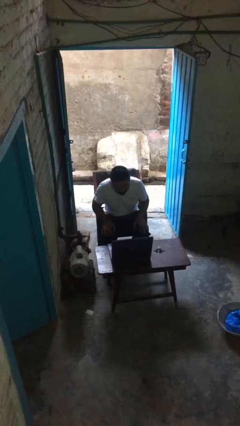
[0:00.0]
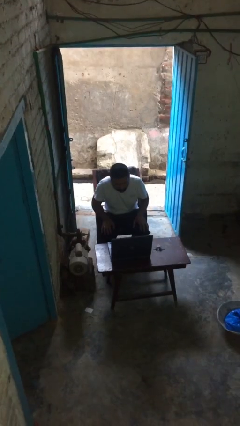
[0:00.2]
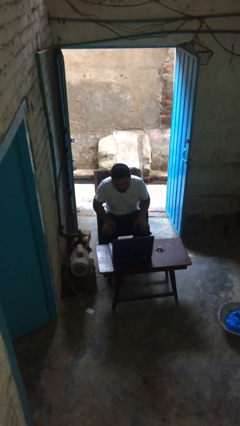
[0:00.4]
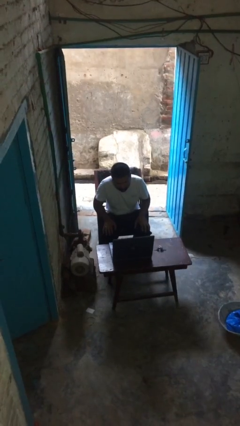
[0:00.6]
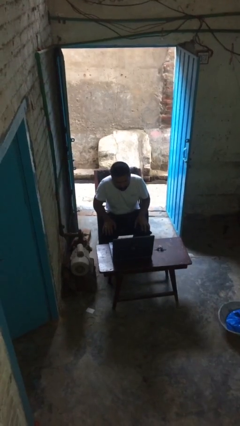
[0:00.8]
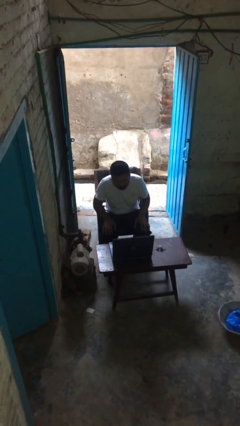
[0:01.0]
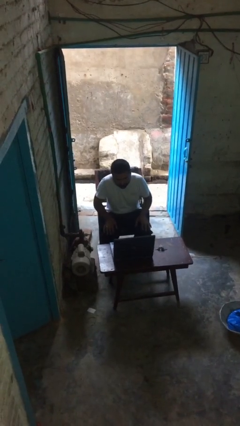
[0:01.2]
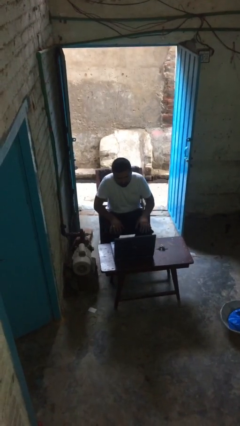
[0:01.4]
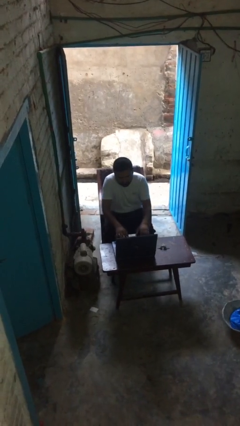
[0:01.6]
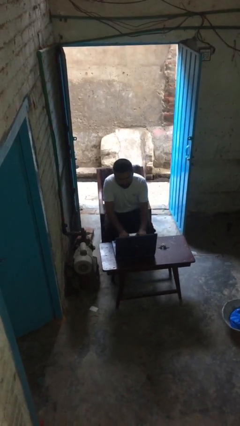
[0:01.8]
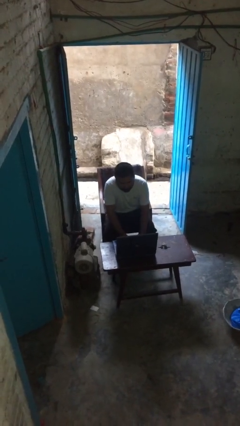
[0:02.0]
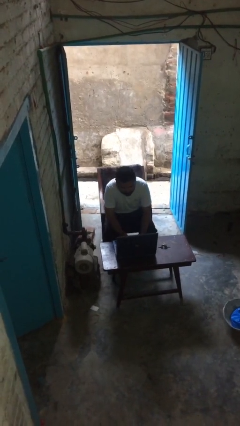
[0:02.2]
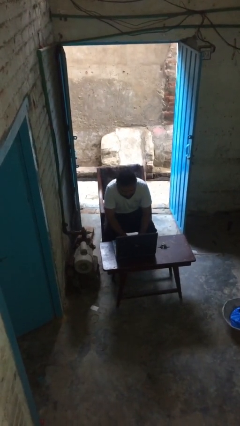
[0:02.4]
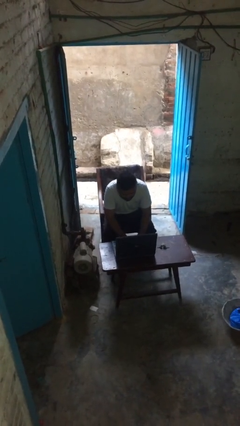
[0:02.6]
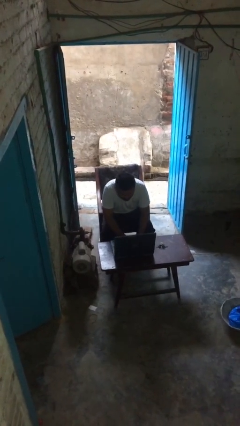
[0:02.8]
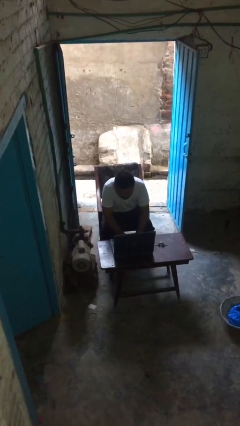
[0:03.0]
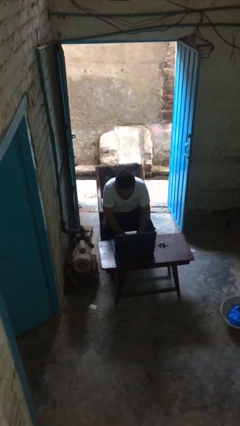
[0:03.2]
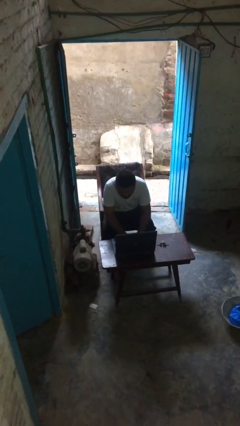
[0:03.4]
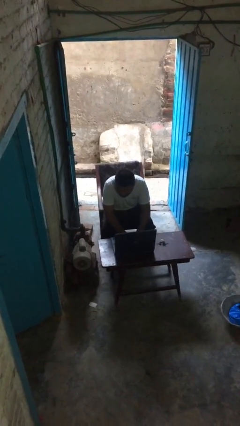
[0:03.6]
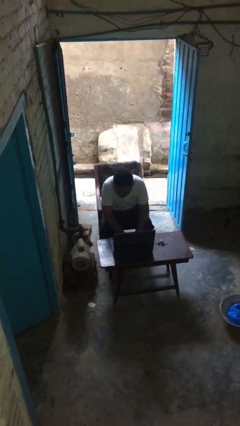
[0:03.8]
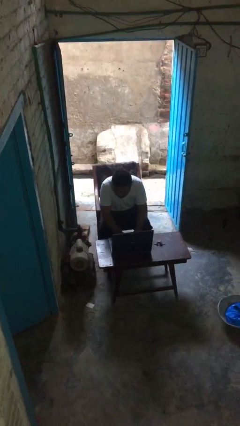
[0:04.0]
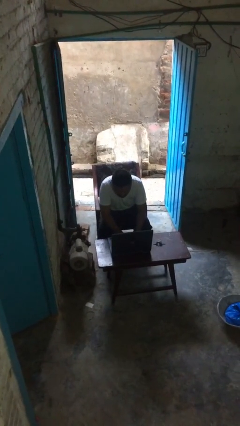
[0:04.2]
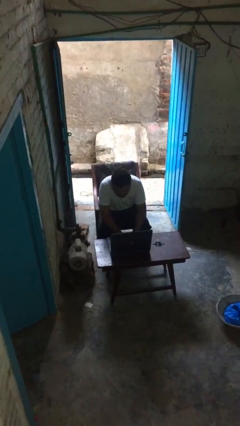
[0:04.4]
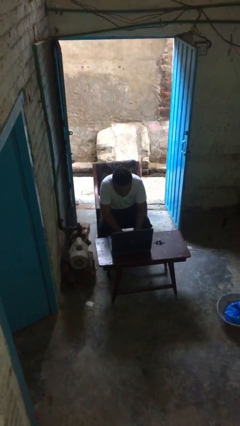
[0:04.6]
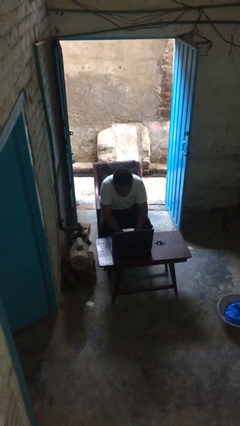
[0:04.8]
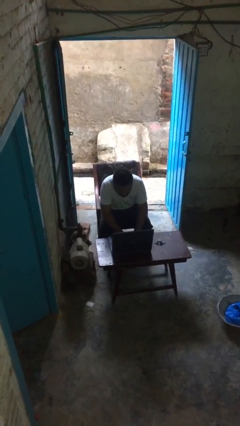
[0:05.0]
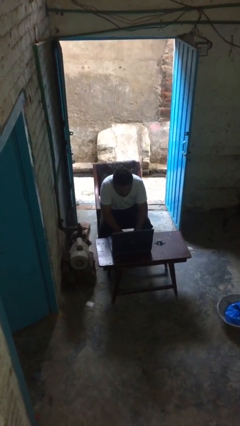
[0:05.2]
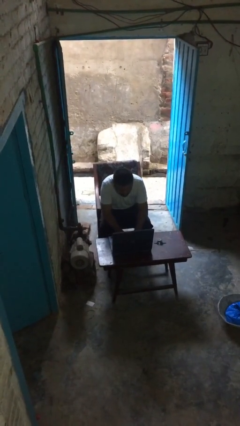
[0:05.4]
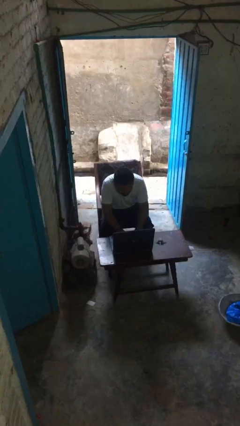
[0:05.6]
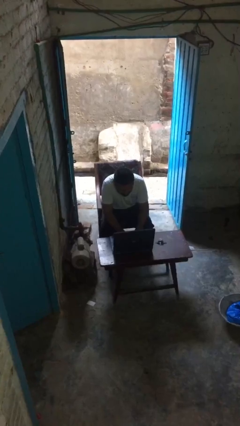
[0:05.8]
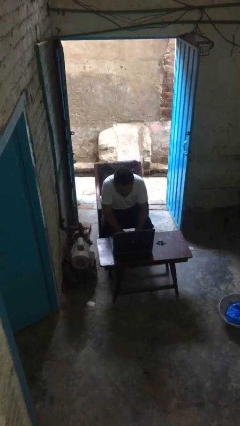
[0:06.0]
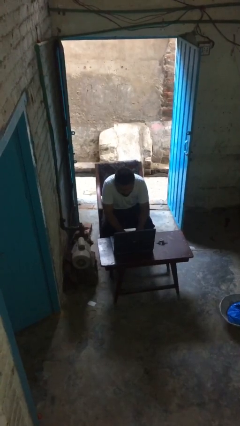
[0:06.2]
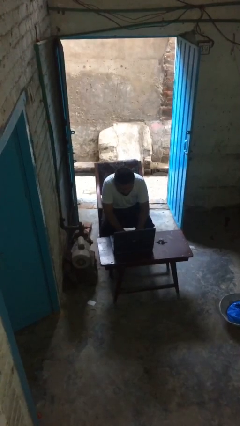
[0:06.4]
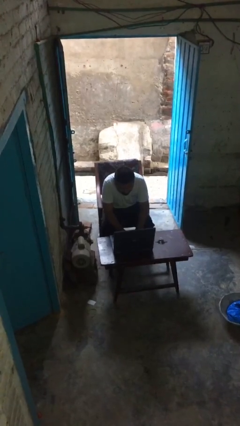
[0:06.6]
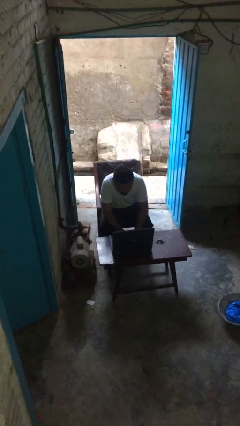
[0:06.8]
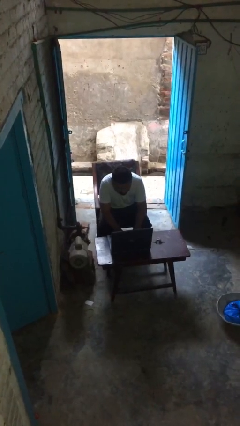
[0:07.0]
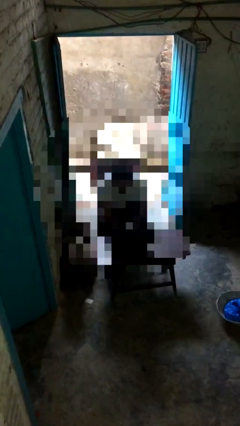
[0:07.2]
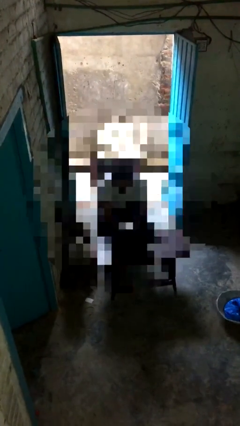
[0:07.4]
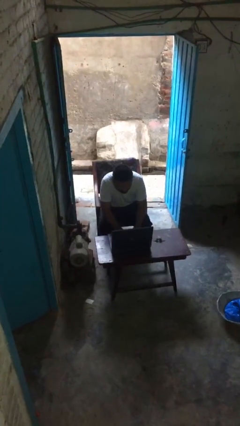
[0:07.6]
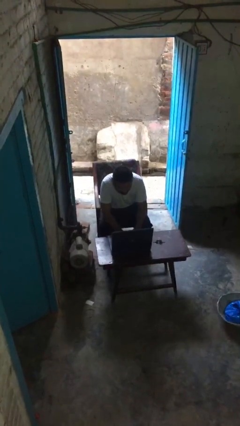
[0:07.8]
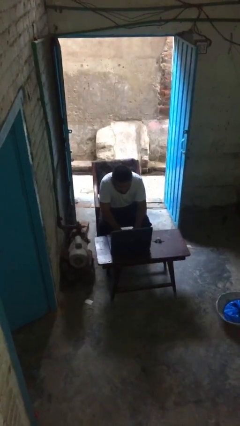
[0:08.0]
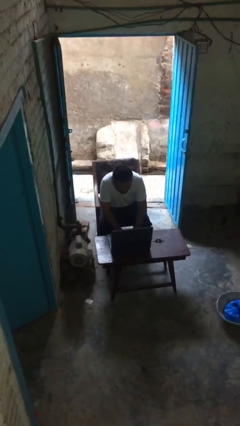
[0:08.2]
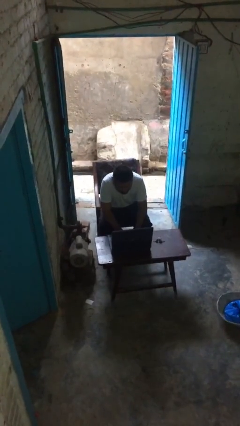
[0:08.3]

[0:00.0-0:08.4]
person interacts with laptop

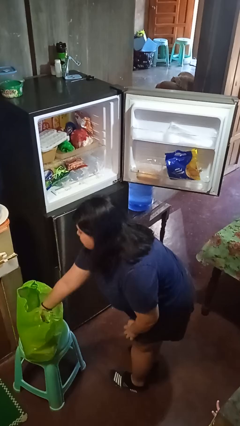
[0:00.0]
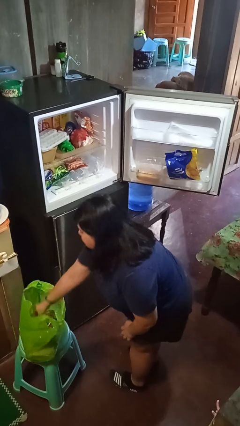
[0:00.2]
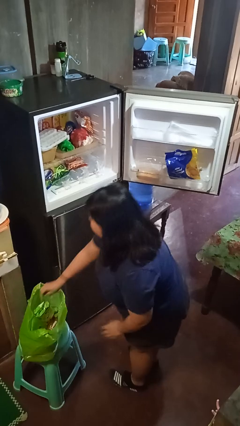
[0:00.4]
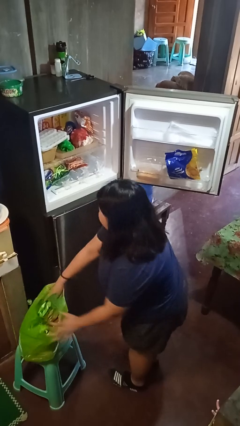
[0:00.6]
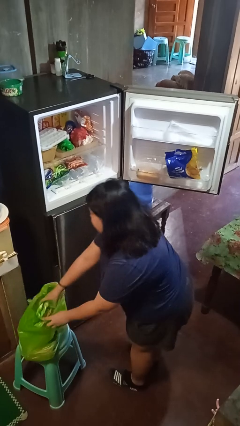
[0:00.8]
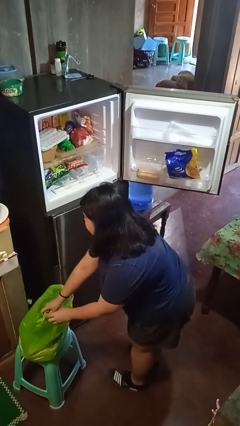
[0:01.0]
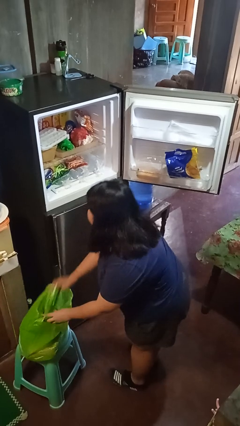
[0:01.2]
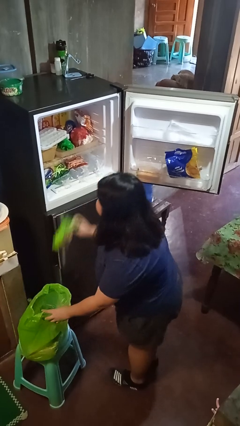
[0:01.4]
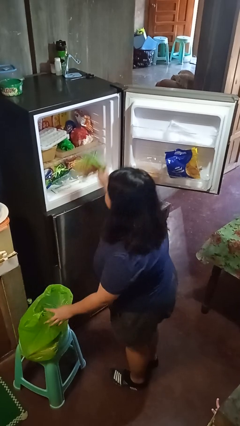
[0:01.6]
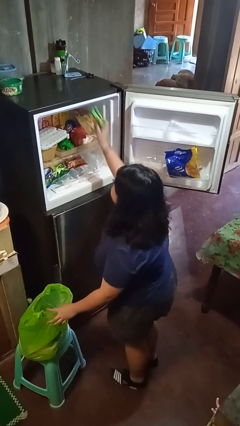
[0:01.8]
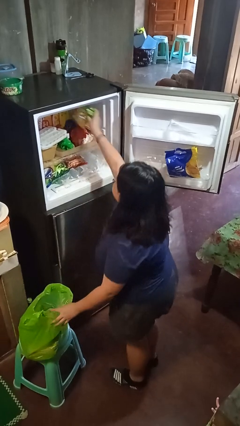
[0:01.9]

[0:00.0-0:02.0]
person loads groceries into refrigerator

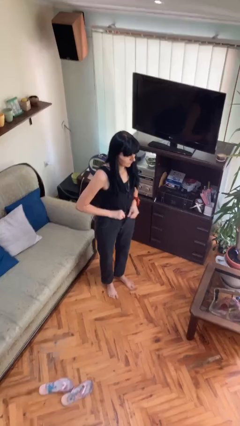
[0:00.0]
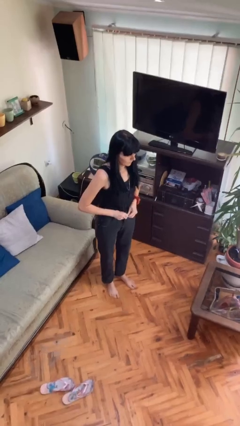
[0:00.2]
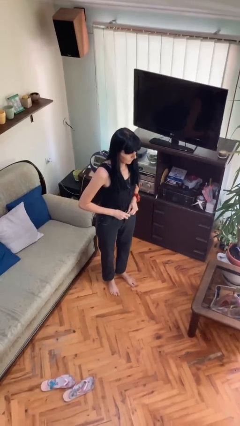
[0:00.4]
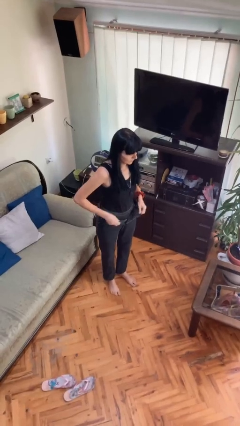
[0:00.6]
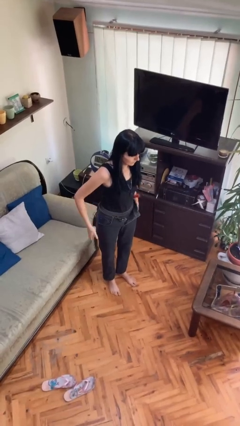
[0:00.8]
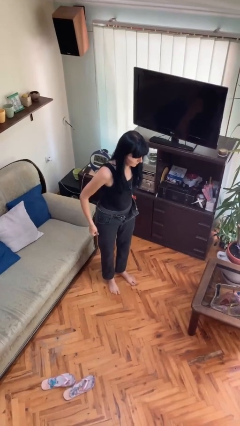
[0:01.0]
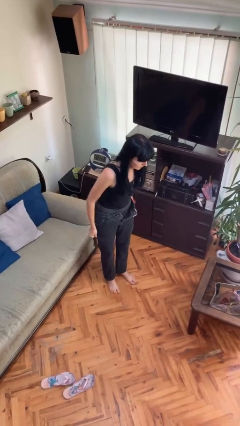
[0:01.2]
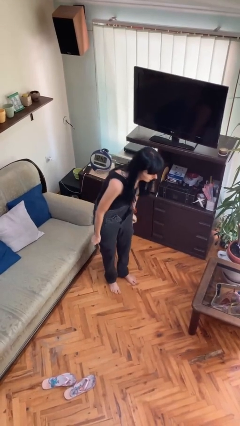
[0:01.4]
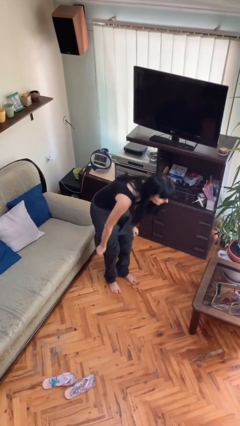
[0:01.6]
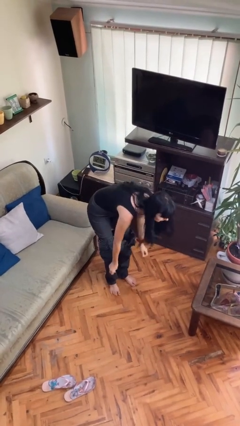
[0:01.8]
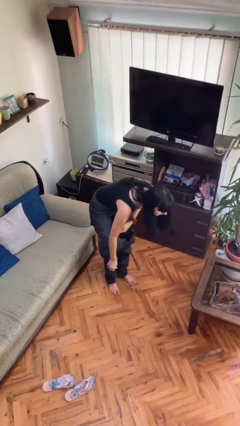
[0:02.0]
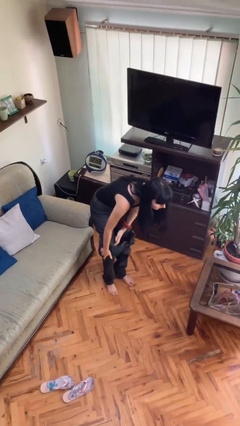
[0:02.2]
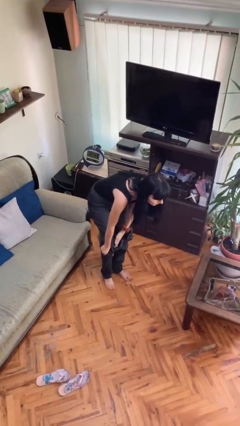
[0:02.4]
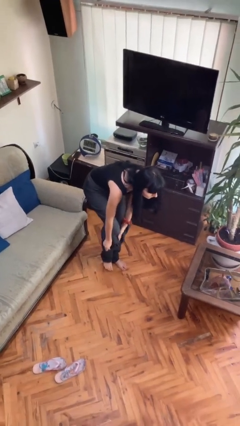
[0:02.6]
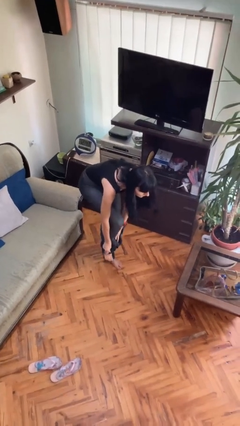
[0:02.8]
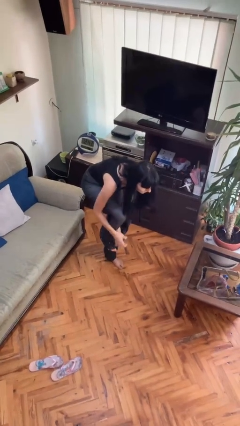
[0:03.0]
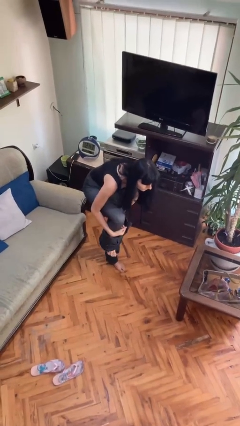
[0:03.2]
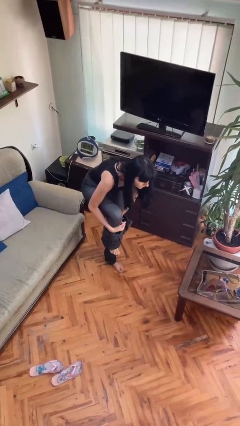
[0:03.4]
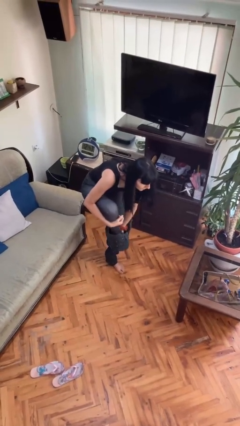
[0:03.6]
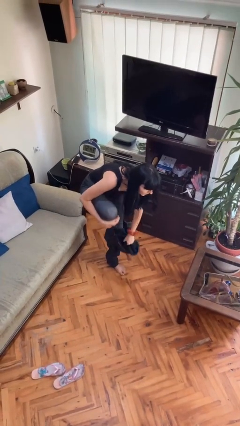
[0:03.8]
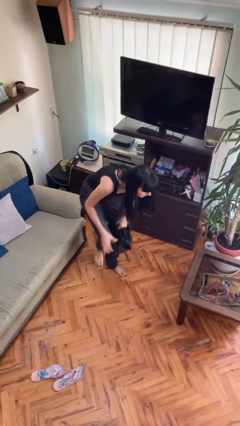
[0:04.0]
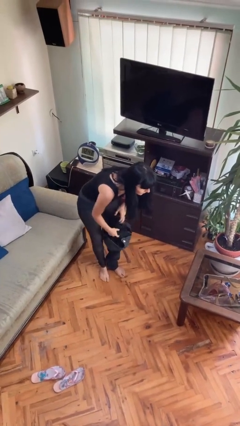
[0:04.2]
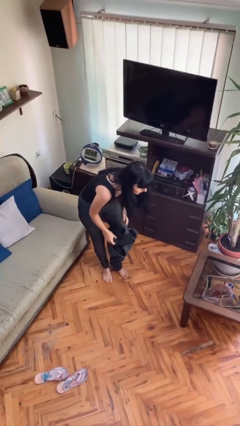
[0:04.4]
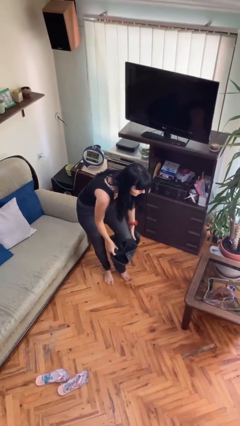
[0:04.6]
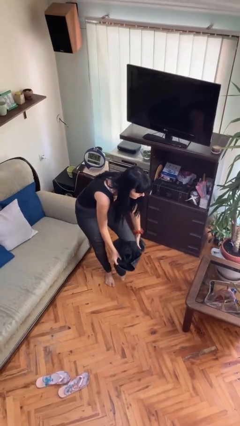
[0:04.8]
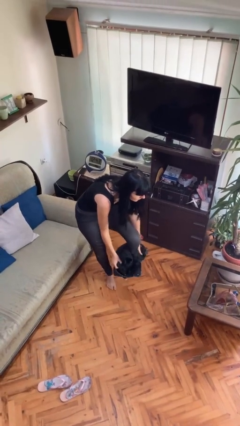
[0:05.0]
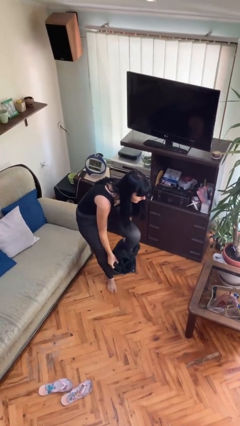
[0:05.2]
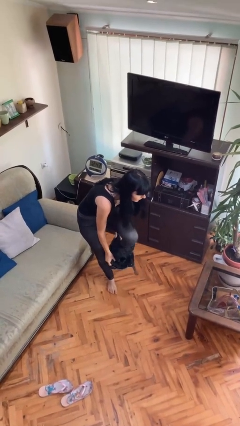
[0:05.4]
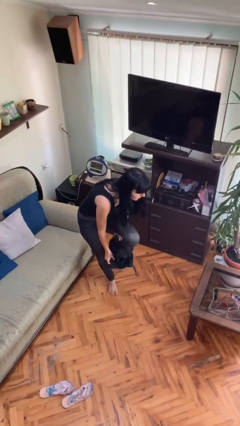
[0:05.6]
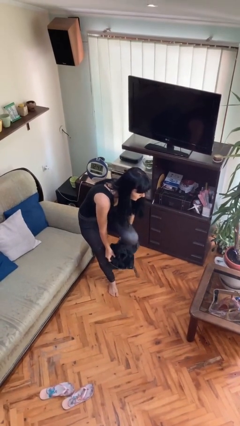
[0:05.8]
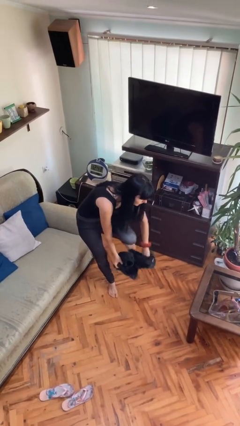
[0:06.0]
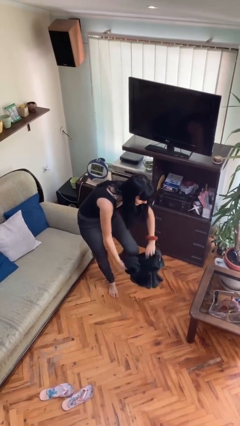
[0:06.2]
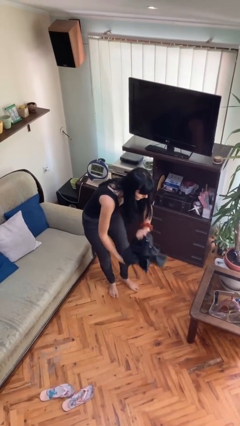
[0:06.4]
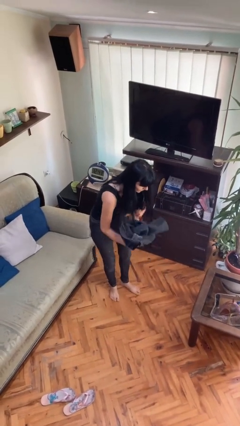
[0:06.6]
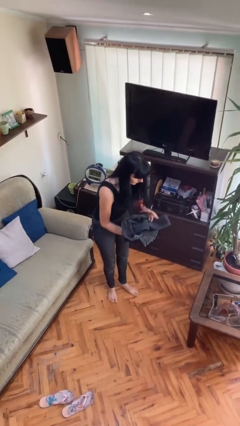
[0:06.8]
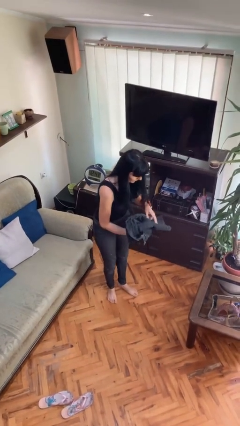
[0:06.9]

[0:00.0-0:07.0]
person takes off pants

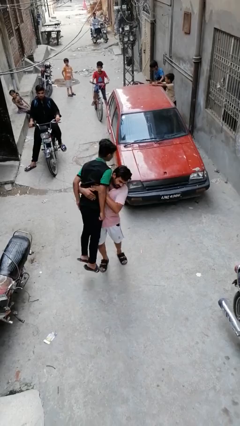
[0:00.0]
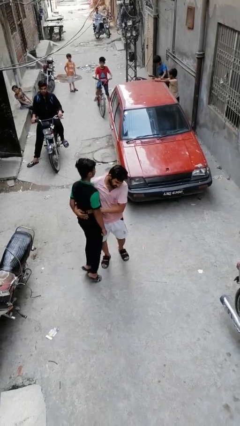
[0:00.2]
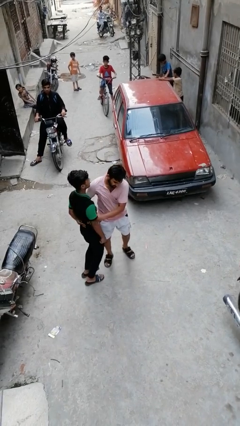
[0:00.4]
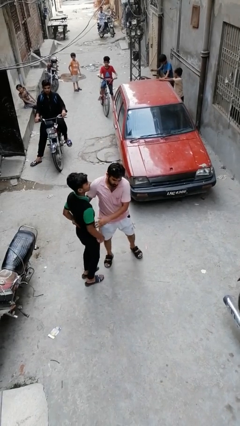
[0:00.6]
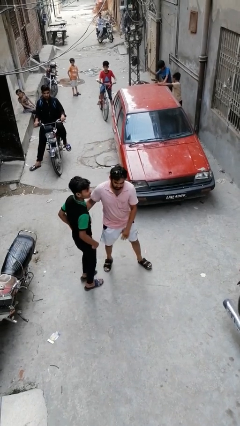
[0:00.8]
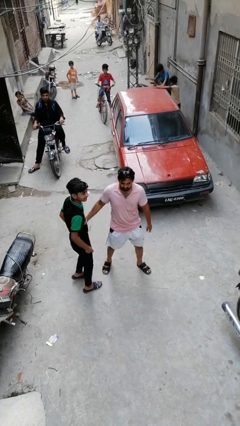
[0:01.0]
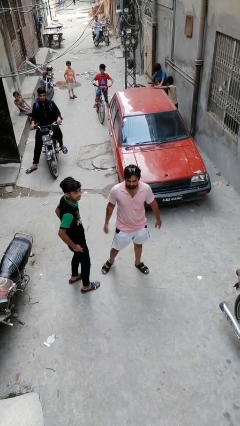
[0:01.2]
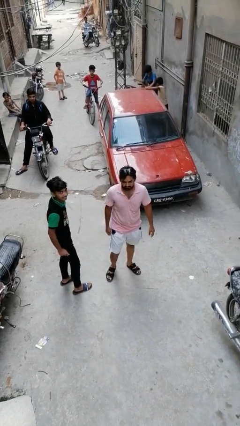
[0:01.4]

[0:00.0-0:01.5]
person puts down person
